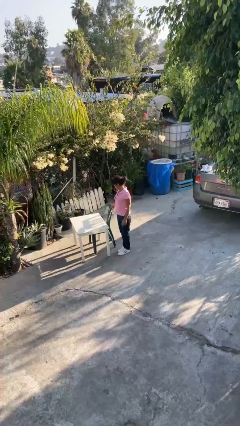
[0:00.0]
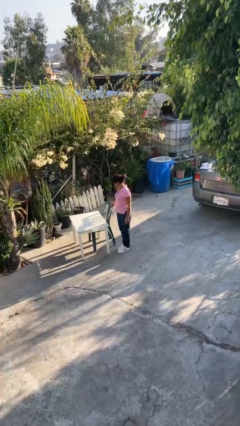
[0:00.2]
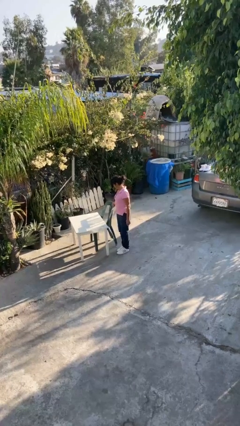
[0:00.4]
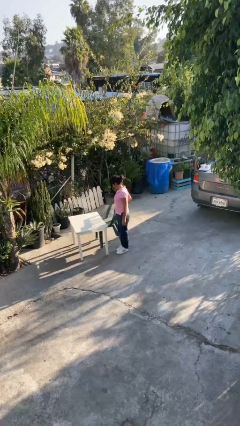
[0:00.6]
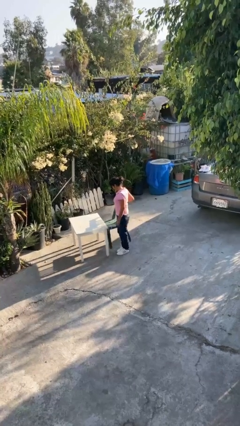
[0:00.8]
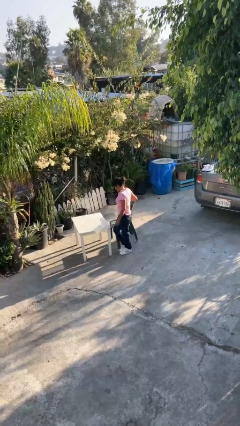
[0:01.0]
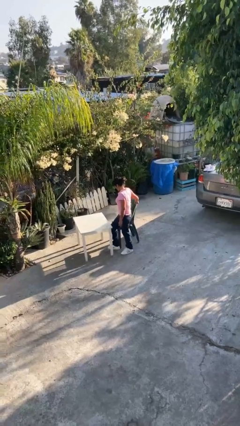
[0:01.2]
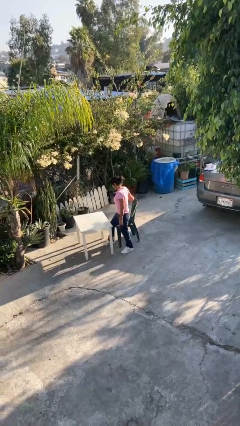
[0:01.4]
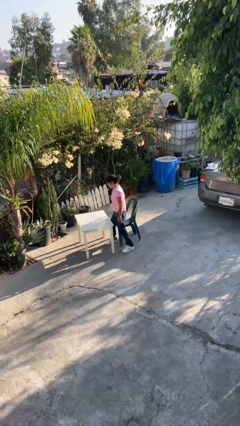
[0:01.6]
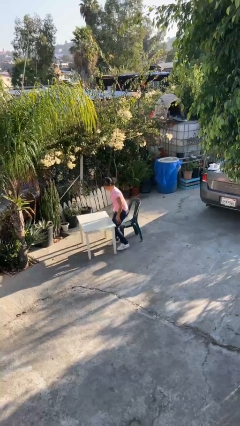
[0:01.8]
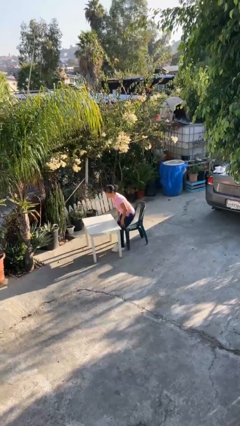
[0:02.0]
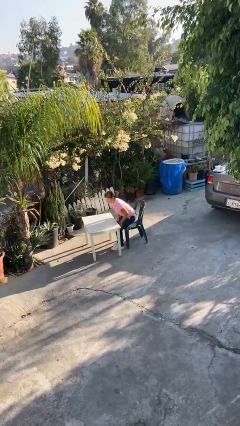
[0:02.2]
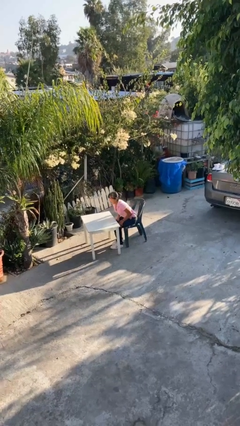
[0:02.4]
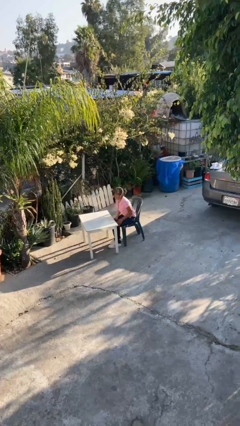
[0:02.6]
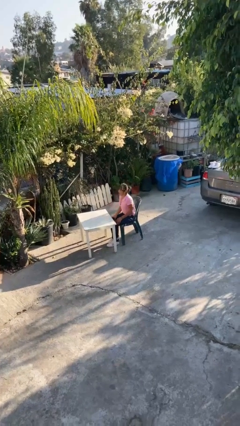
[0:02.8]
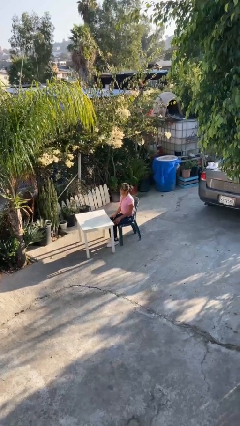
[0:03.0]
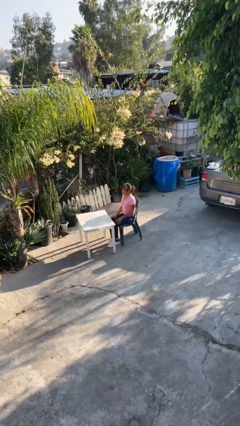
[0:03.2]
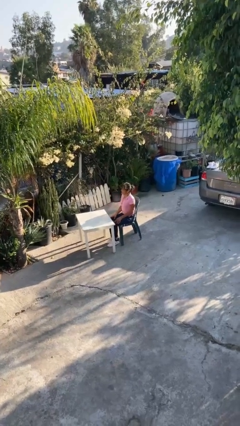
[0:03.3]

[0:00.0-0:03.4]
person sits down

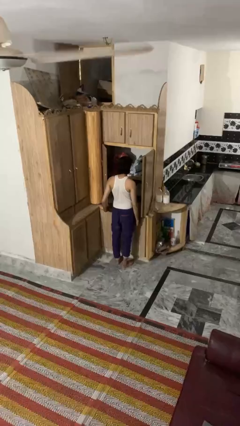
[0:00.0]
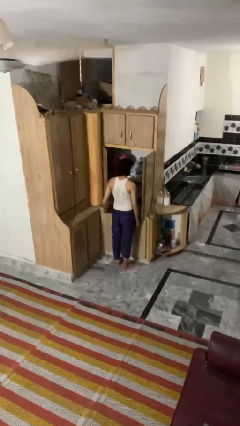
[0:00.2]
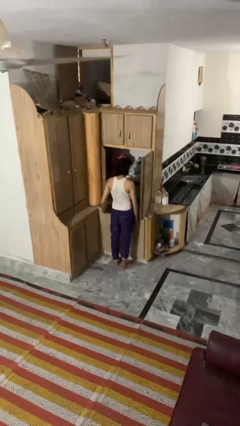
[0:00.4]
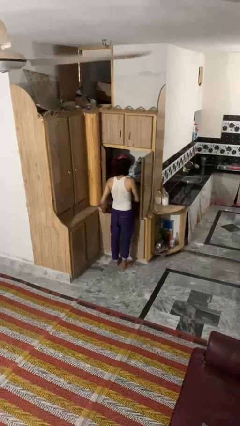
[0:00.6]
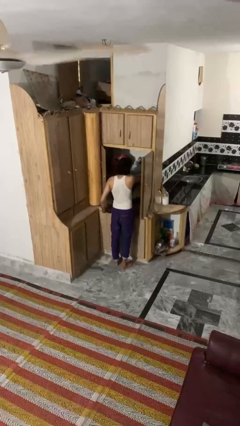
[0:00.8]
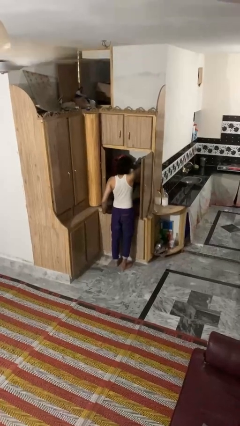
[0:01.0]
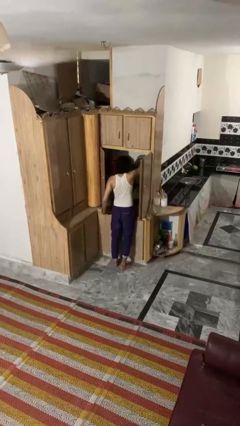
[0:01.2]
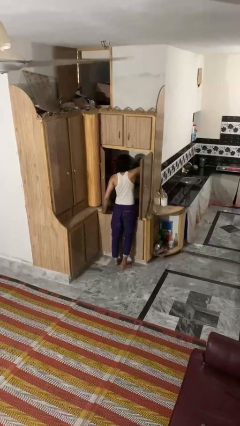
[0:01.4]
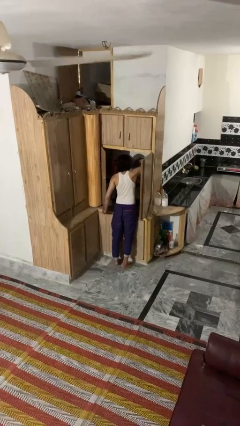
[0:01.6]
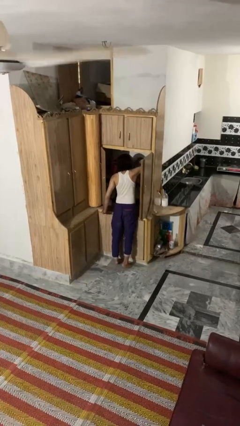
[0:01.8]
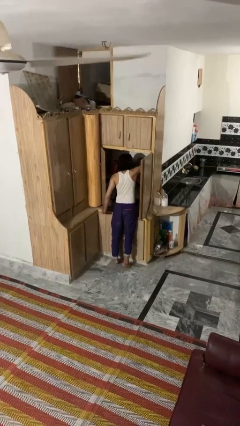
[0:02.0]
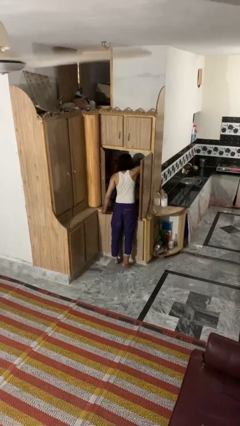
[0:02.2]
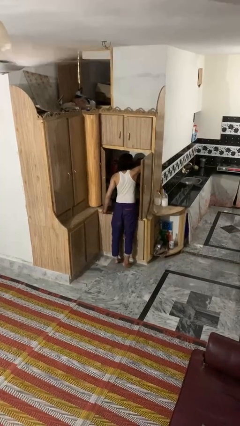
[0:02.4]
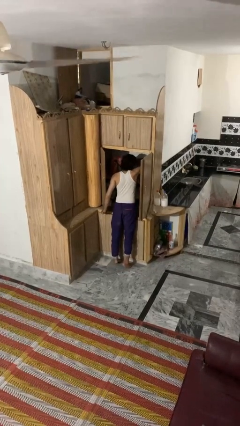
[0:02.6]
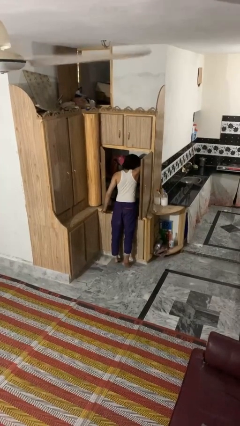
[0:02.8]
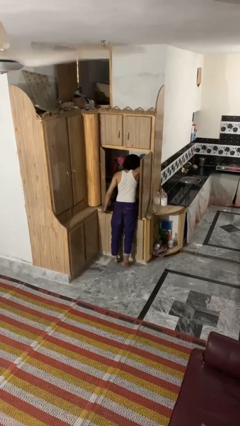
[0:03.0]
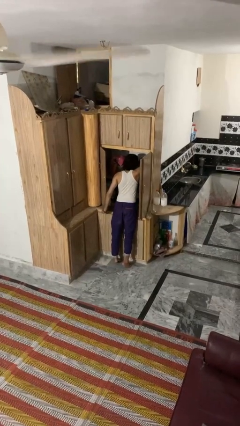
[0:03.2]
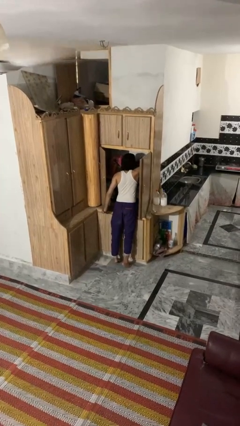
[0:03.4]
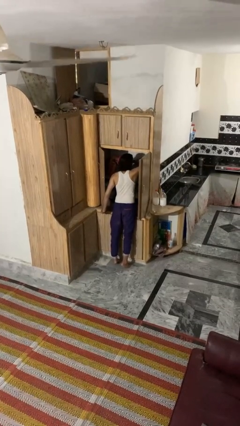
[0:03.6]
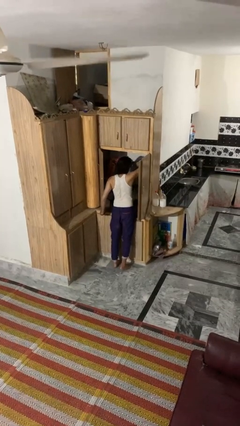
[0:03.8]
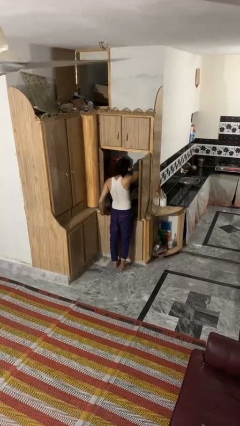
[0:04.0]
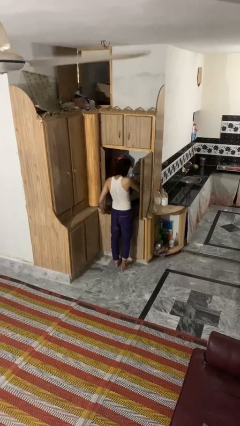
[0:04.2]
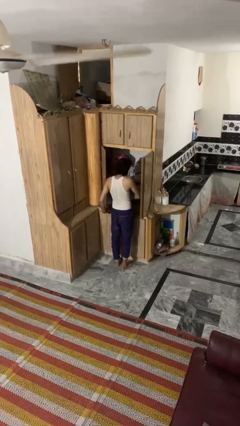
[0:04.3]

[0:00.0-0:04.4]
person searches in cabinet

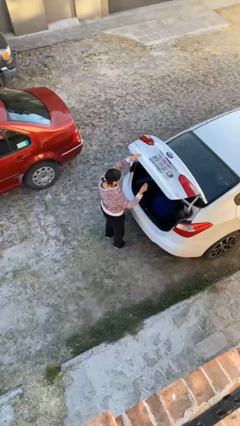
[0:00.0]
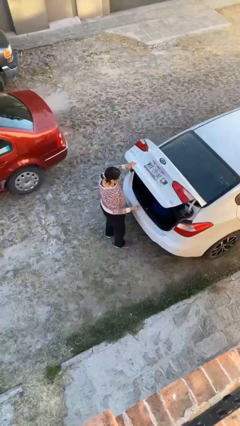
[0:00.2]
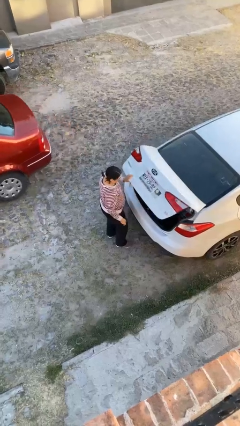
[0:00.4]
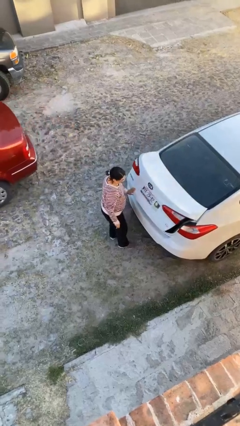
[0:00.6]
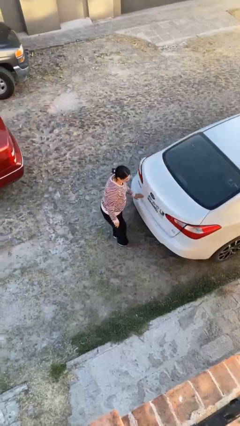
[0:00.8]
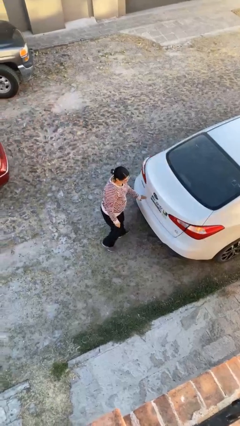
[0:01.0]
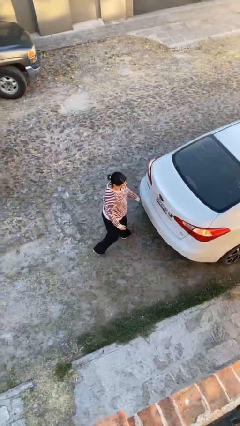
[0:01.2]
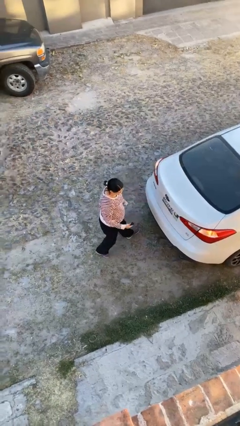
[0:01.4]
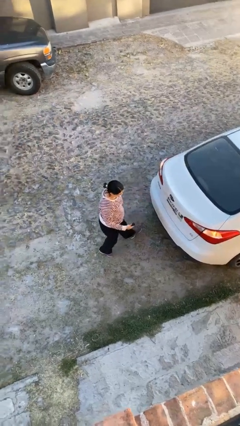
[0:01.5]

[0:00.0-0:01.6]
person closes car trunk

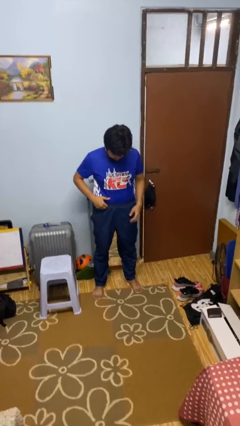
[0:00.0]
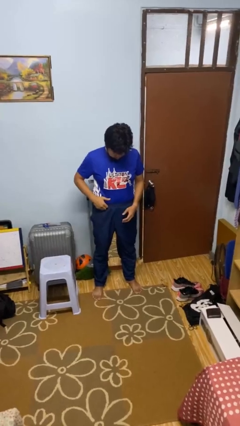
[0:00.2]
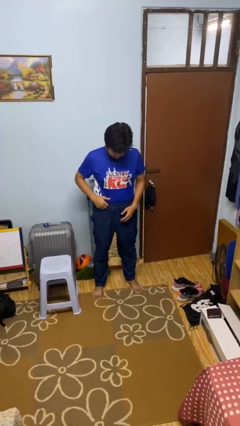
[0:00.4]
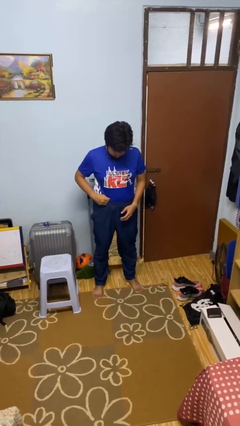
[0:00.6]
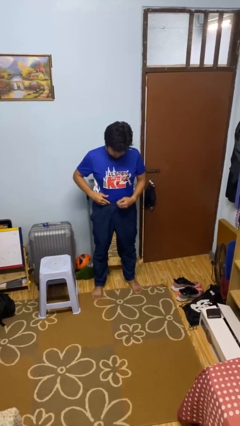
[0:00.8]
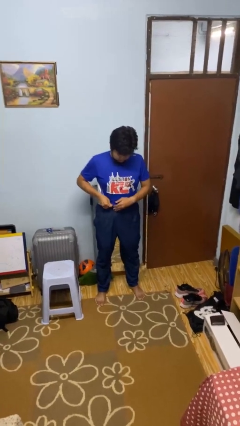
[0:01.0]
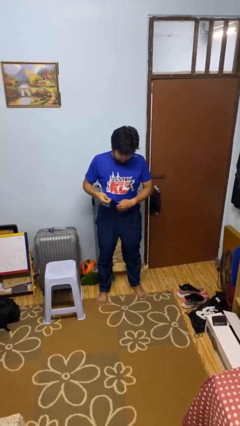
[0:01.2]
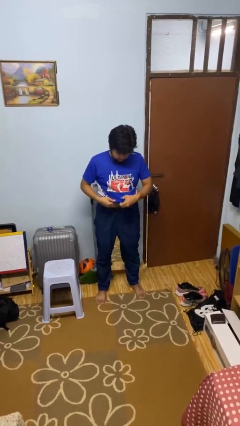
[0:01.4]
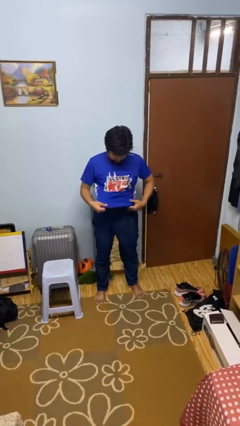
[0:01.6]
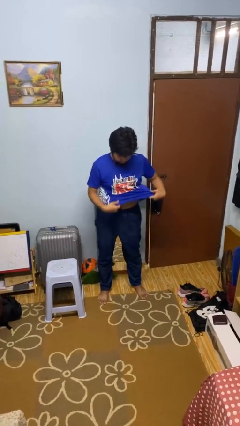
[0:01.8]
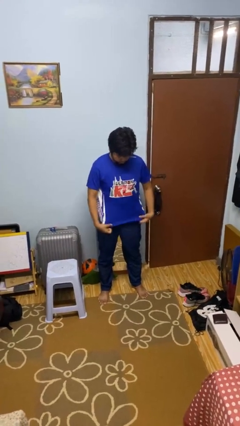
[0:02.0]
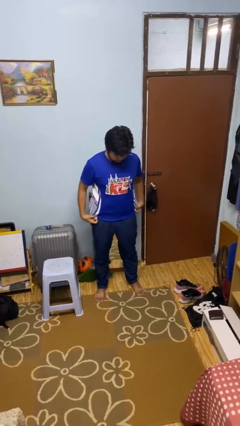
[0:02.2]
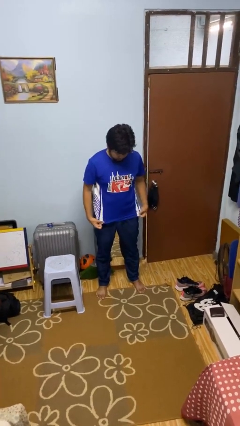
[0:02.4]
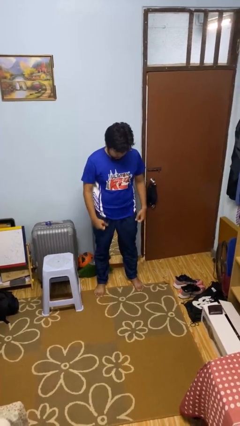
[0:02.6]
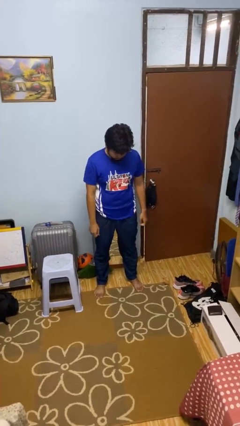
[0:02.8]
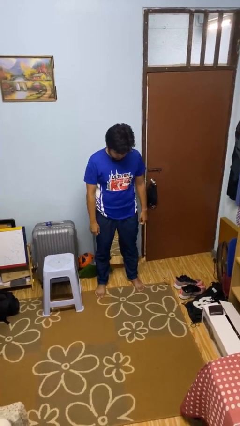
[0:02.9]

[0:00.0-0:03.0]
person untucks shirt

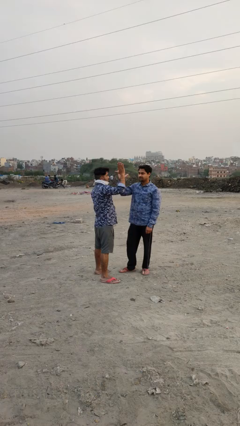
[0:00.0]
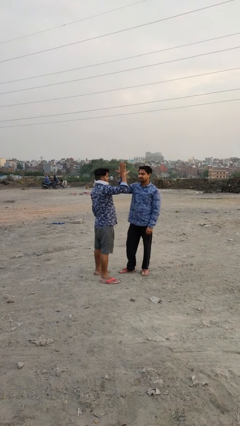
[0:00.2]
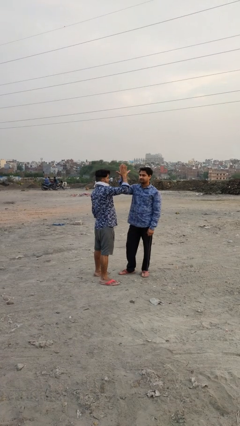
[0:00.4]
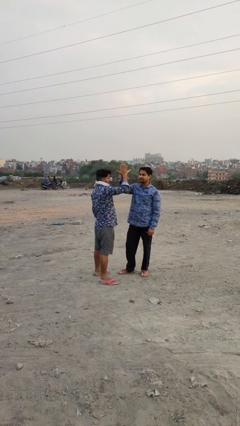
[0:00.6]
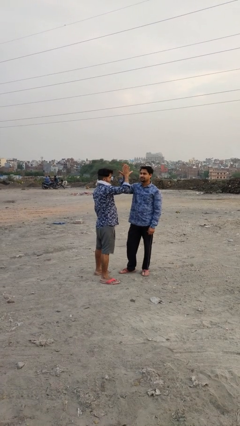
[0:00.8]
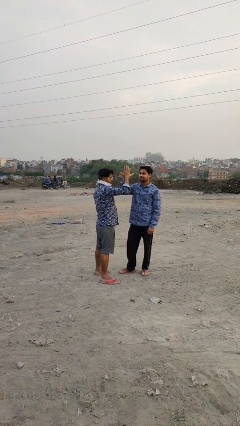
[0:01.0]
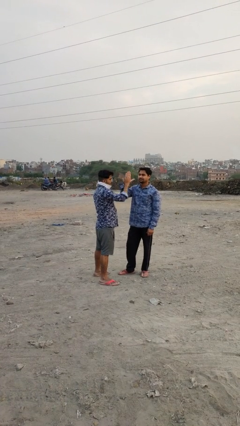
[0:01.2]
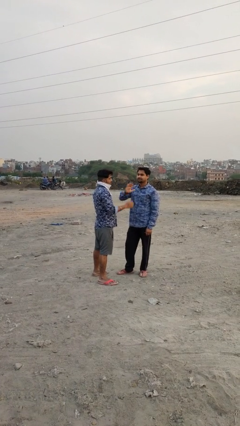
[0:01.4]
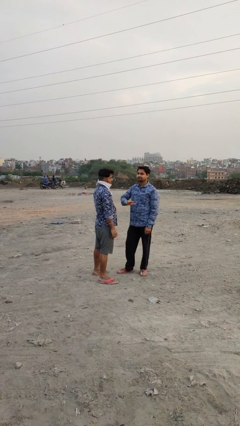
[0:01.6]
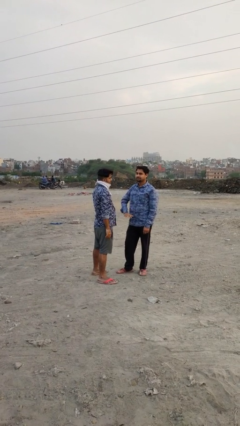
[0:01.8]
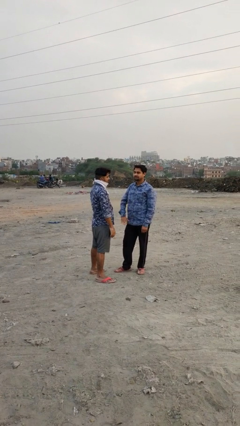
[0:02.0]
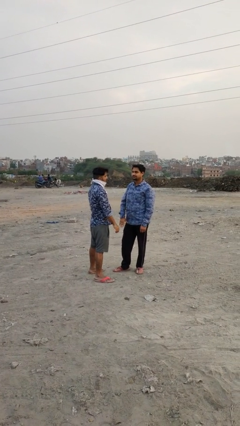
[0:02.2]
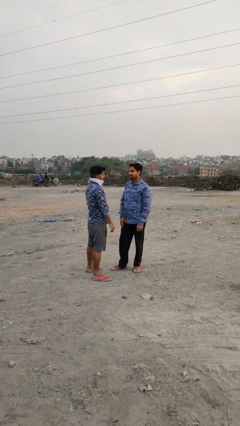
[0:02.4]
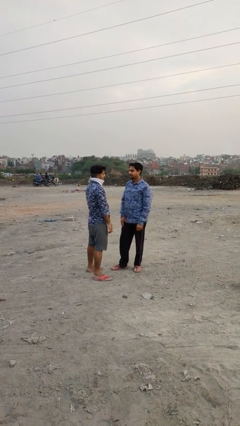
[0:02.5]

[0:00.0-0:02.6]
person highfives hand

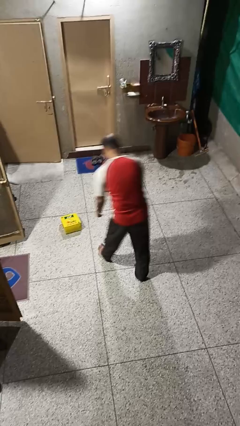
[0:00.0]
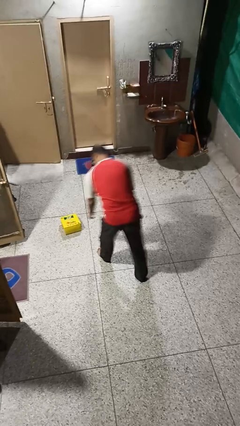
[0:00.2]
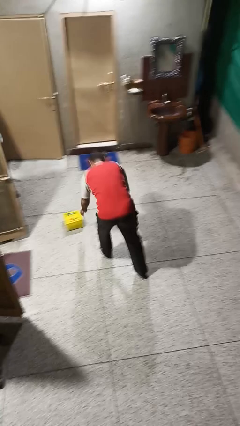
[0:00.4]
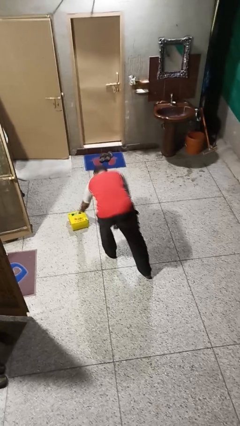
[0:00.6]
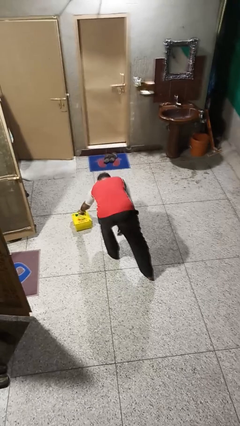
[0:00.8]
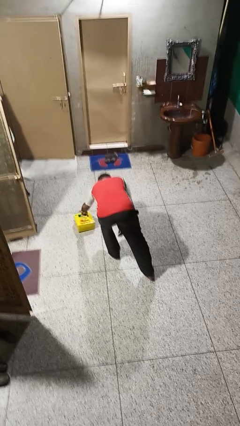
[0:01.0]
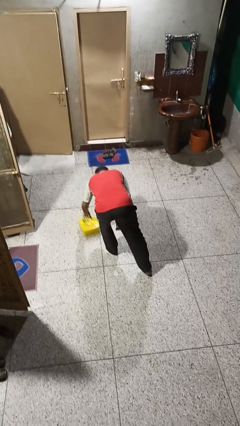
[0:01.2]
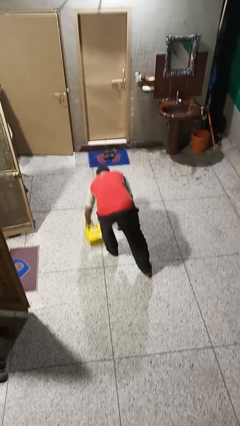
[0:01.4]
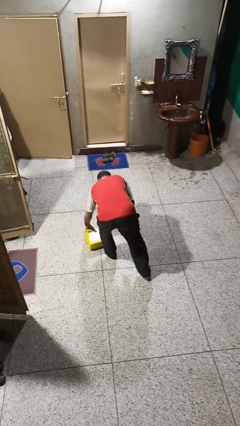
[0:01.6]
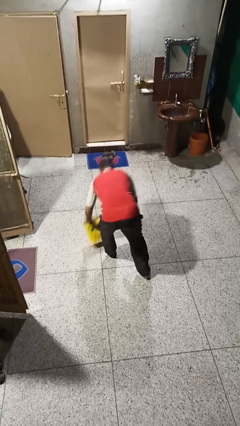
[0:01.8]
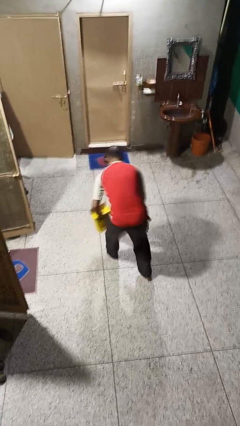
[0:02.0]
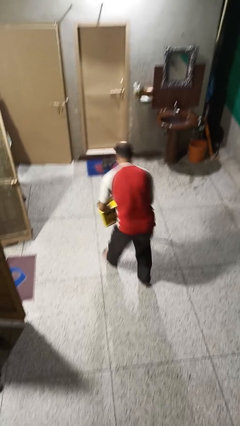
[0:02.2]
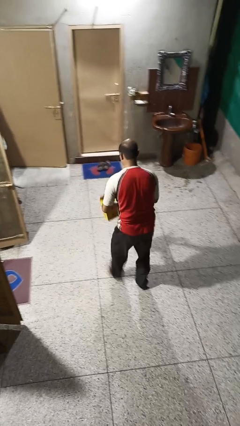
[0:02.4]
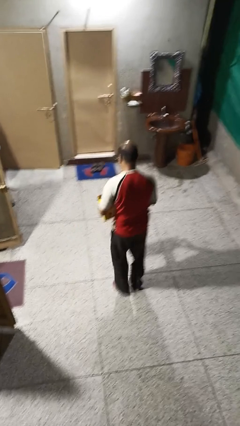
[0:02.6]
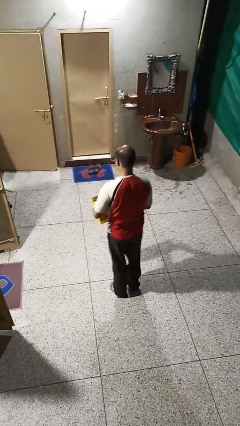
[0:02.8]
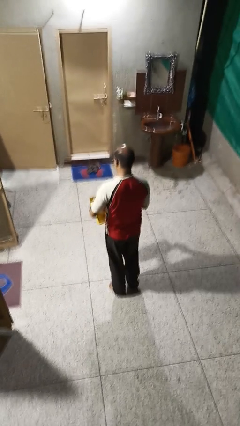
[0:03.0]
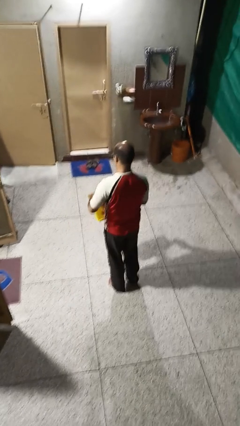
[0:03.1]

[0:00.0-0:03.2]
person picks up object from floor
